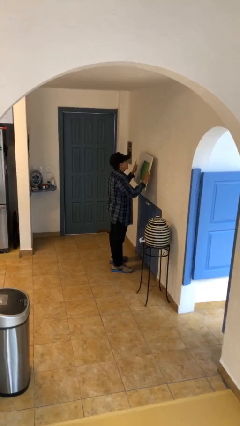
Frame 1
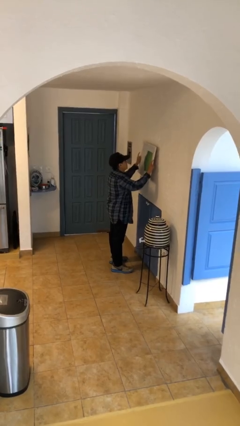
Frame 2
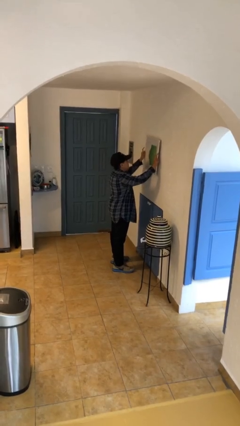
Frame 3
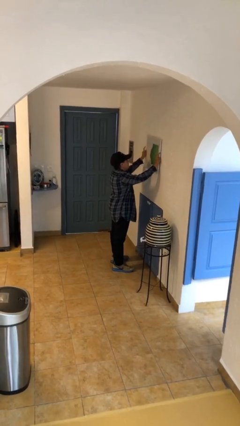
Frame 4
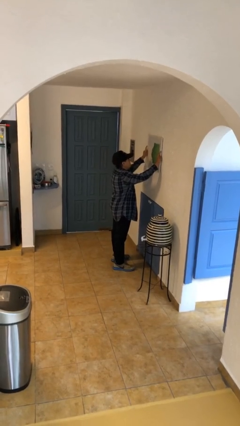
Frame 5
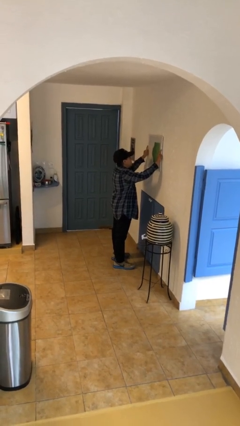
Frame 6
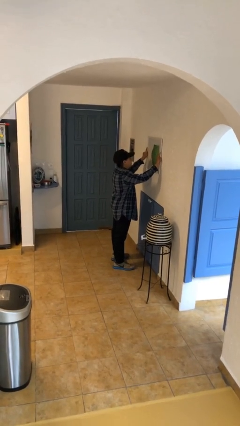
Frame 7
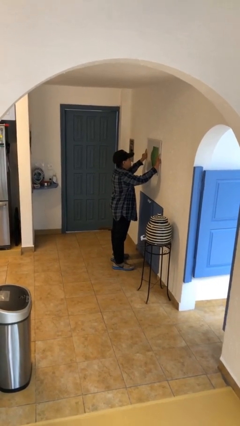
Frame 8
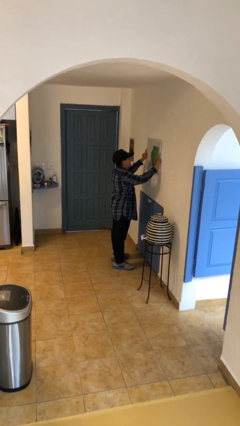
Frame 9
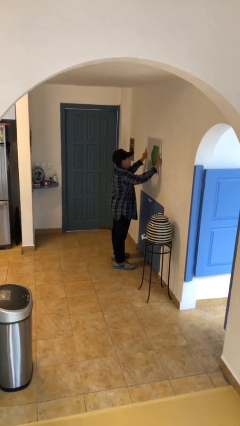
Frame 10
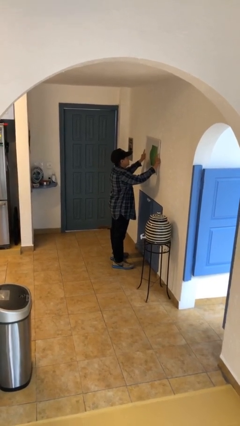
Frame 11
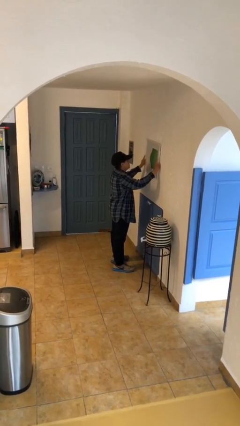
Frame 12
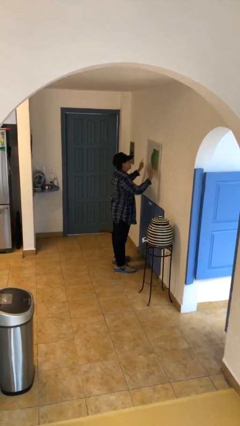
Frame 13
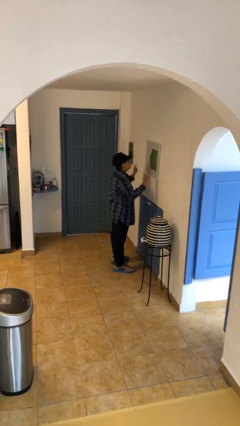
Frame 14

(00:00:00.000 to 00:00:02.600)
person puts up picture frame

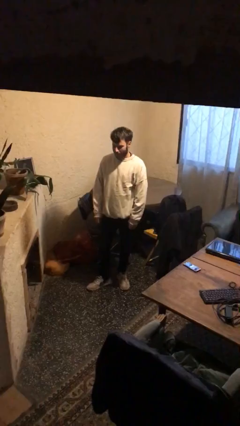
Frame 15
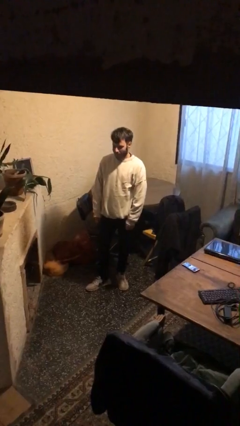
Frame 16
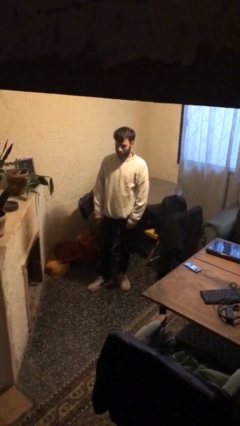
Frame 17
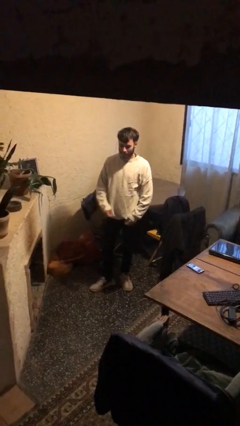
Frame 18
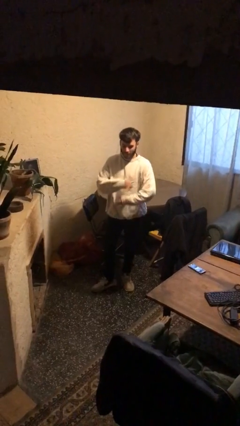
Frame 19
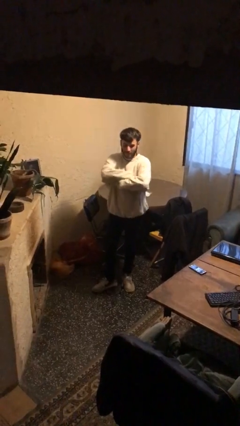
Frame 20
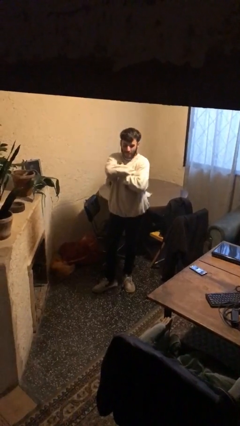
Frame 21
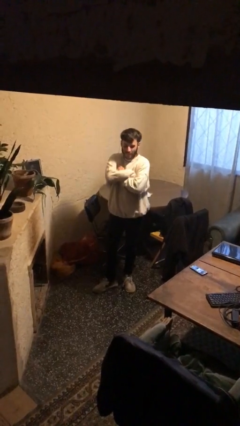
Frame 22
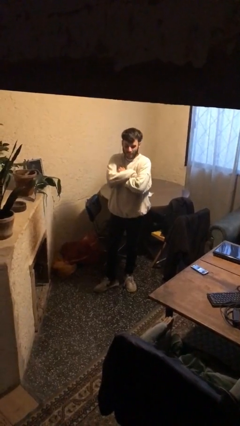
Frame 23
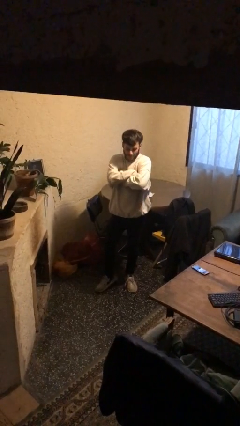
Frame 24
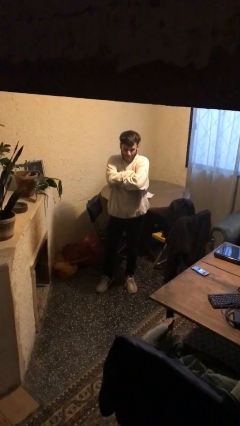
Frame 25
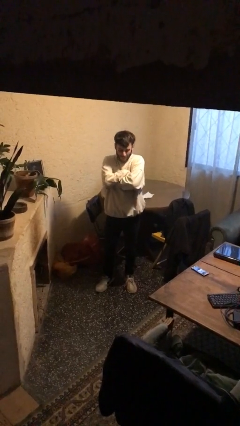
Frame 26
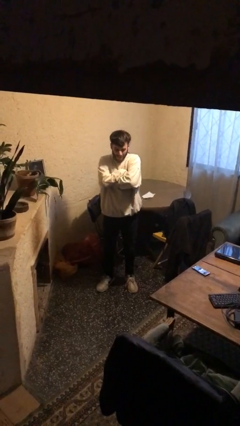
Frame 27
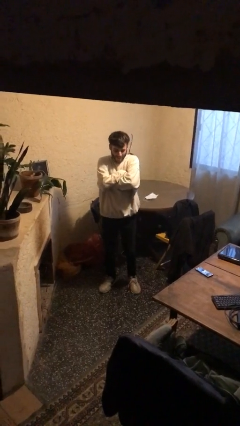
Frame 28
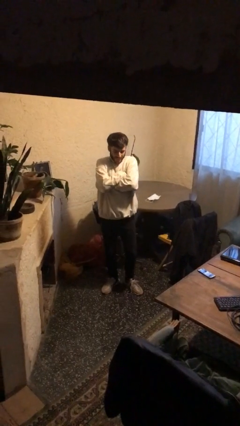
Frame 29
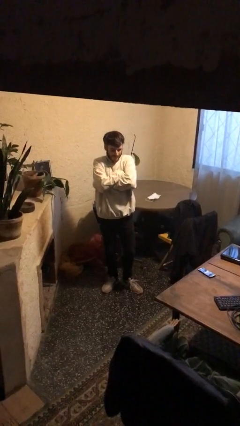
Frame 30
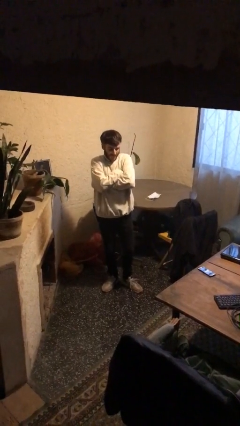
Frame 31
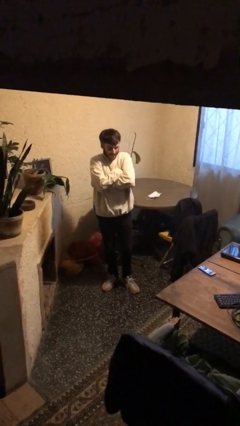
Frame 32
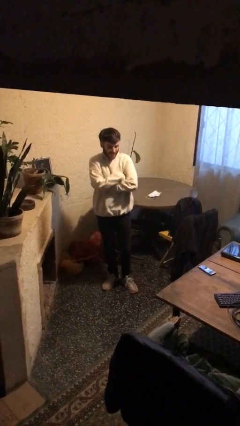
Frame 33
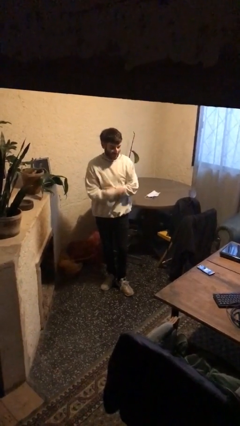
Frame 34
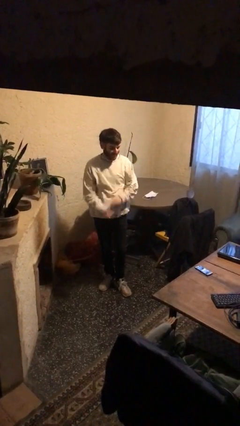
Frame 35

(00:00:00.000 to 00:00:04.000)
person crosses arms

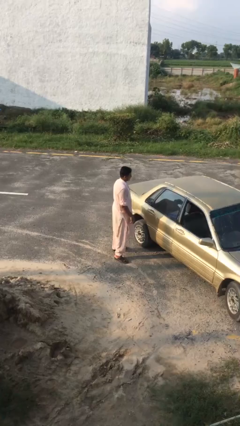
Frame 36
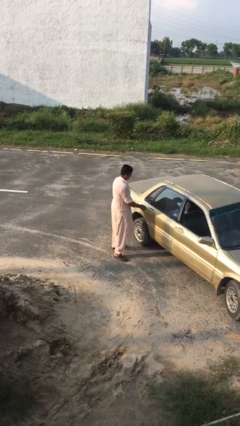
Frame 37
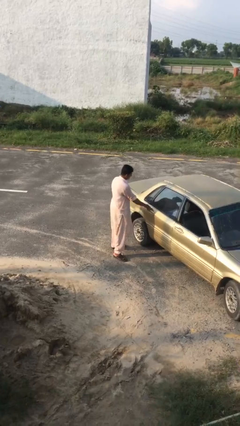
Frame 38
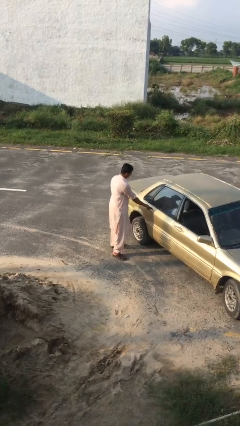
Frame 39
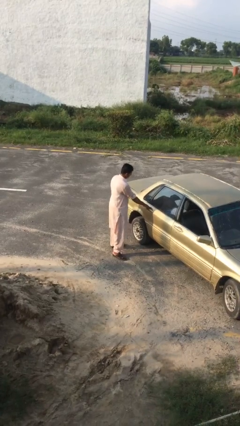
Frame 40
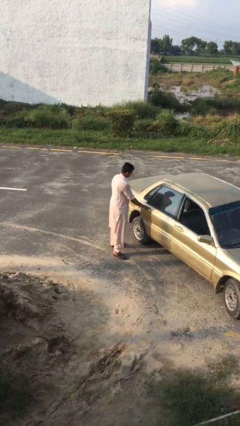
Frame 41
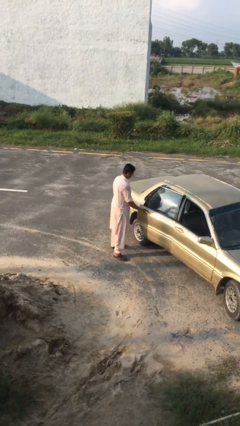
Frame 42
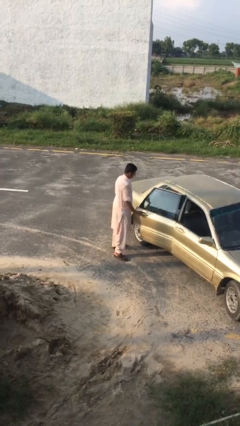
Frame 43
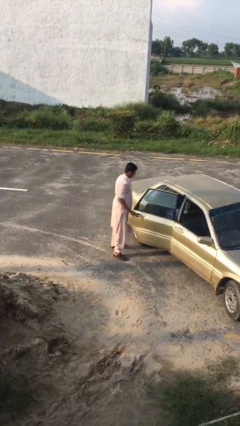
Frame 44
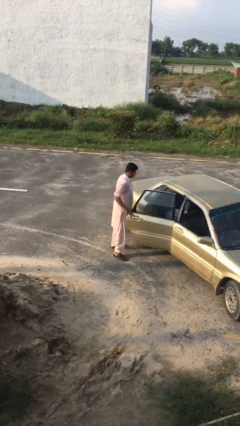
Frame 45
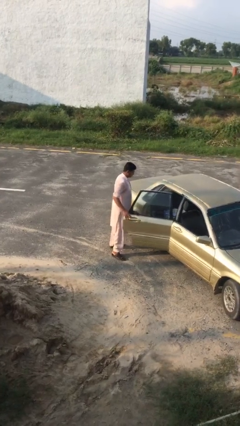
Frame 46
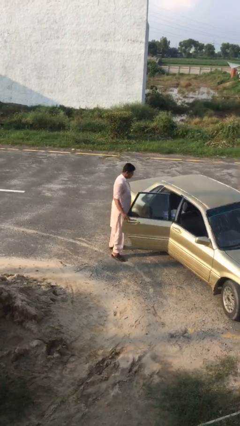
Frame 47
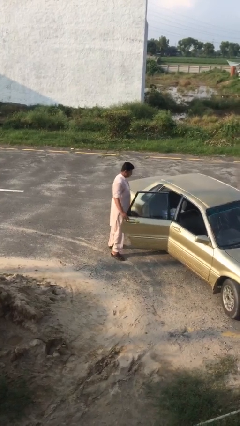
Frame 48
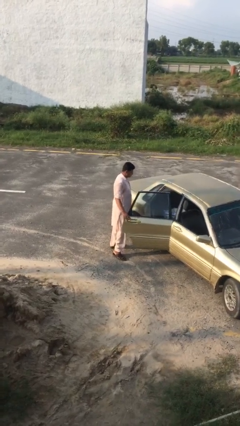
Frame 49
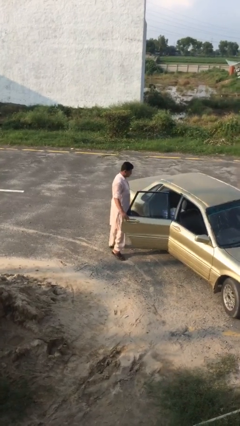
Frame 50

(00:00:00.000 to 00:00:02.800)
person opens car door

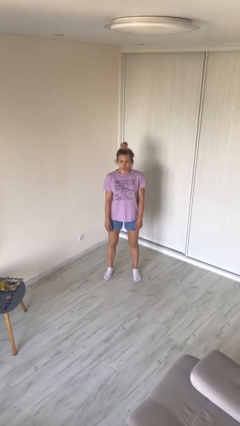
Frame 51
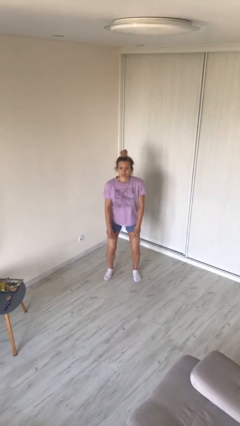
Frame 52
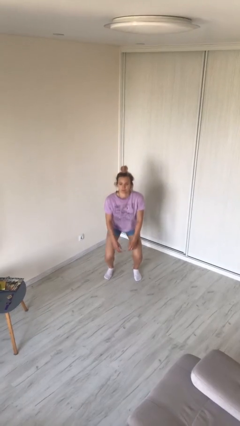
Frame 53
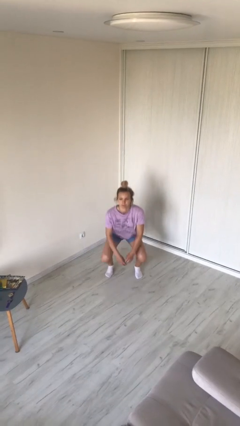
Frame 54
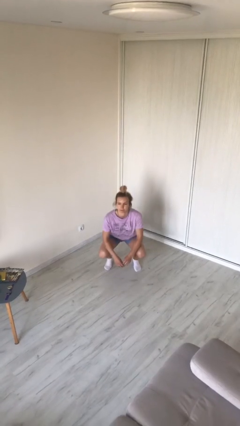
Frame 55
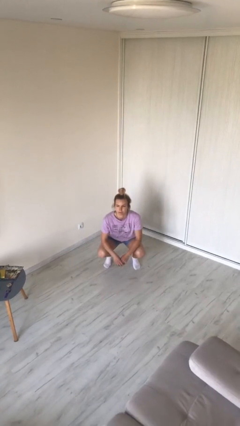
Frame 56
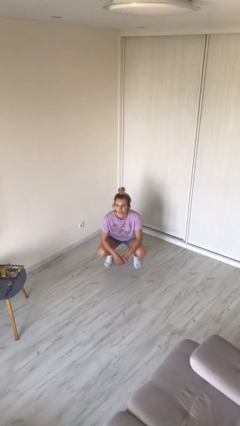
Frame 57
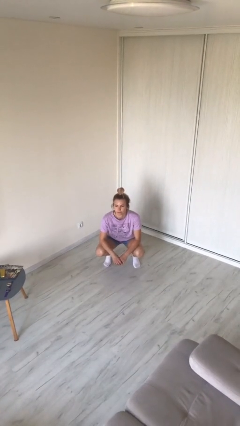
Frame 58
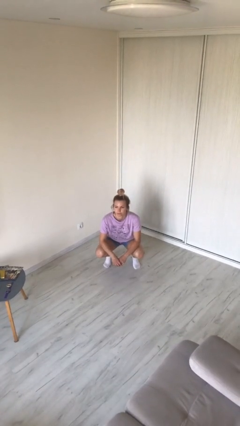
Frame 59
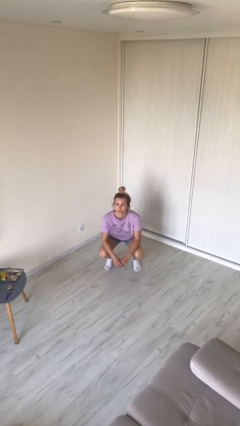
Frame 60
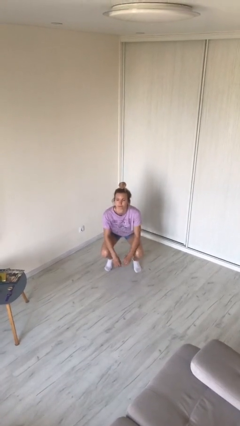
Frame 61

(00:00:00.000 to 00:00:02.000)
person squats

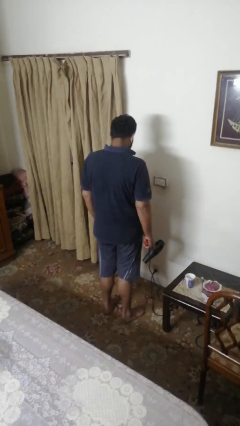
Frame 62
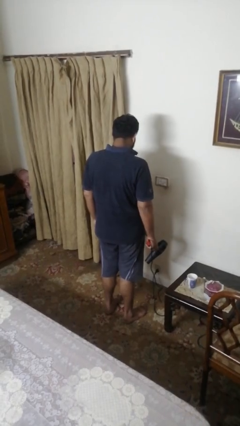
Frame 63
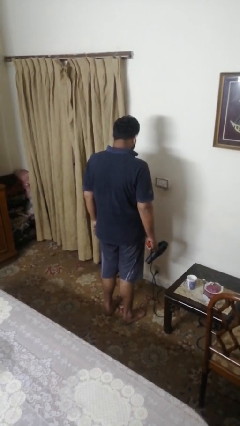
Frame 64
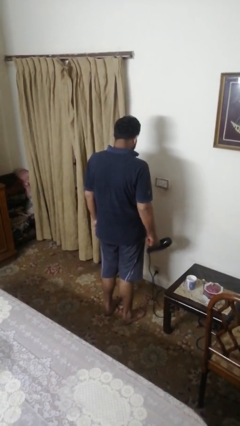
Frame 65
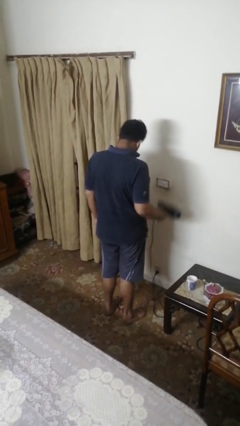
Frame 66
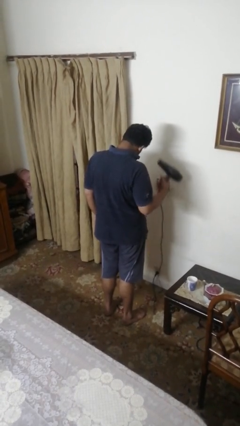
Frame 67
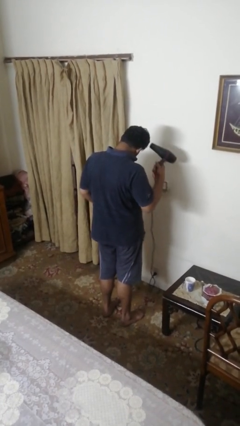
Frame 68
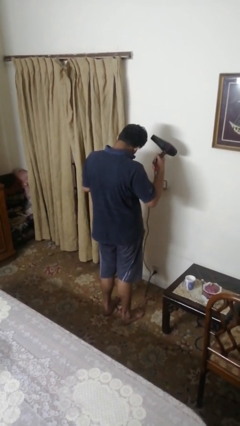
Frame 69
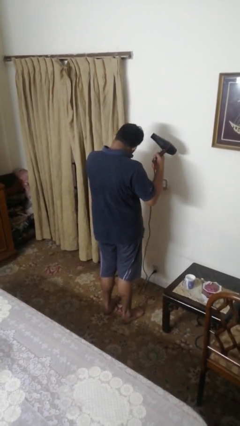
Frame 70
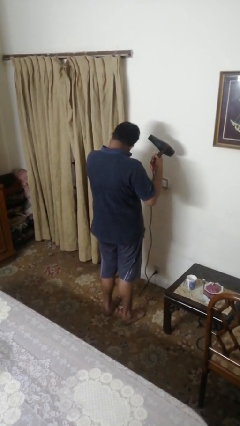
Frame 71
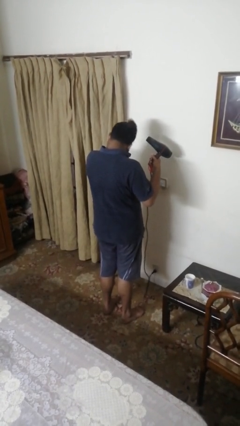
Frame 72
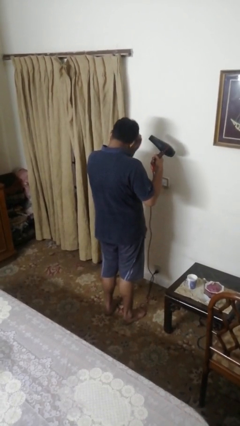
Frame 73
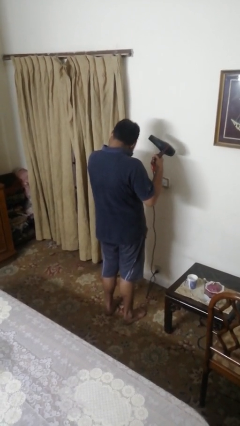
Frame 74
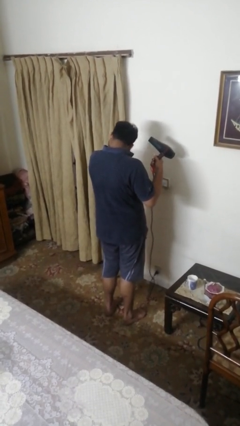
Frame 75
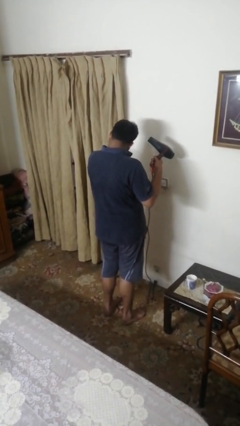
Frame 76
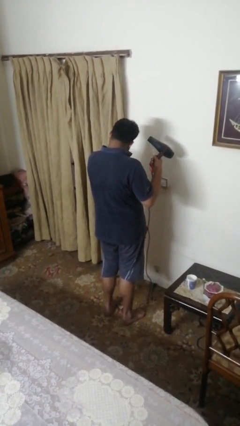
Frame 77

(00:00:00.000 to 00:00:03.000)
person dries hair with hairdryer

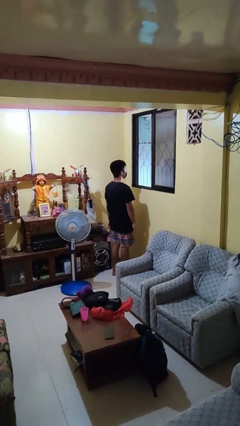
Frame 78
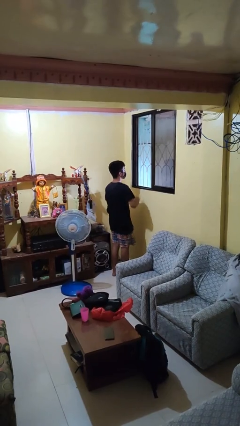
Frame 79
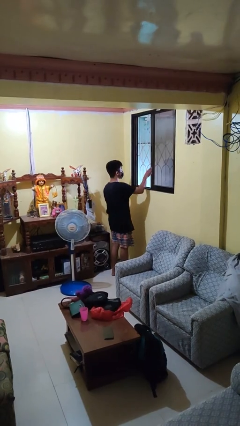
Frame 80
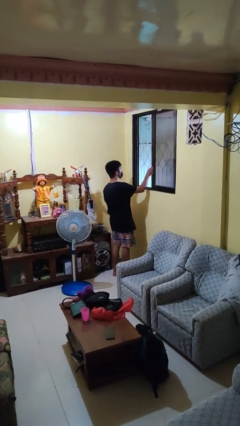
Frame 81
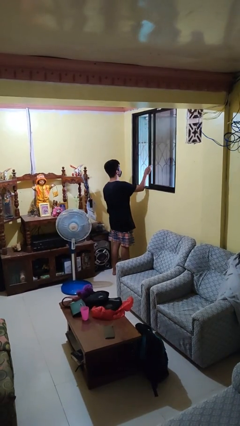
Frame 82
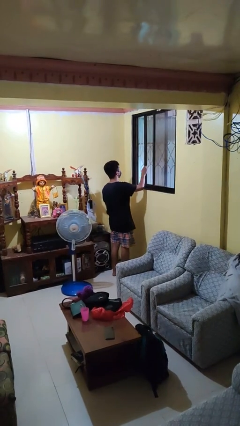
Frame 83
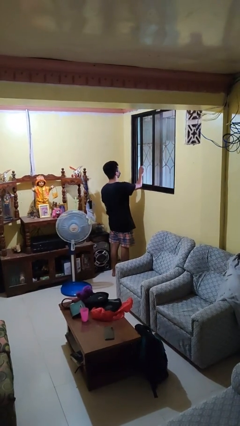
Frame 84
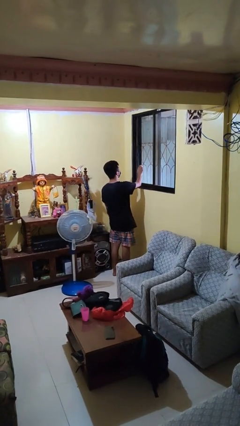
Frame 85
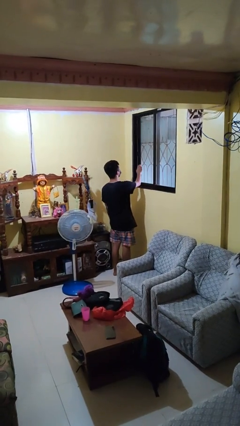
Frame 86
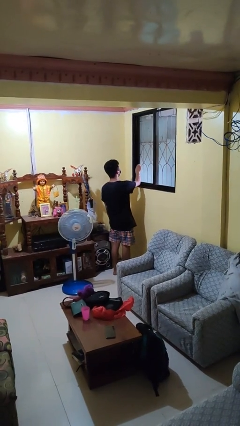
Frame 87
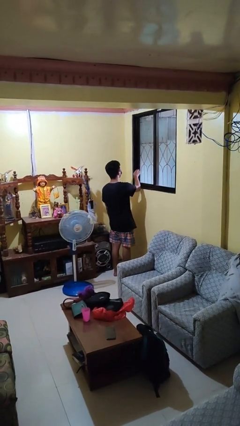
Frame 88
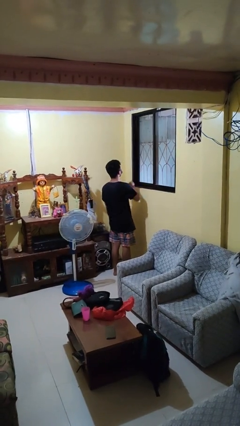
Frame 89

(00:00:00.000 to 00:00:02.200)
person closes home window

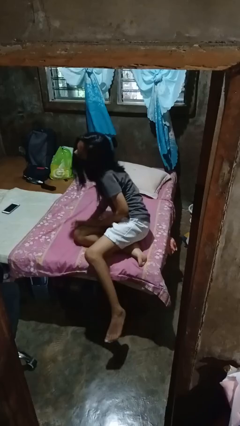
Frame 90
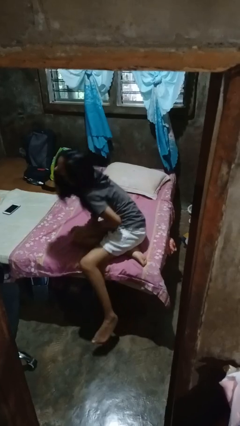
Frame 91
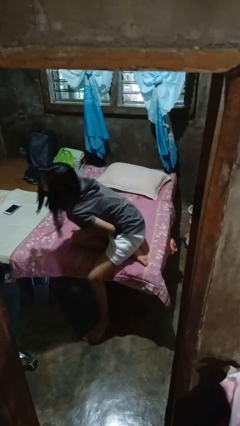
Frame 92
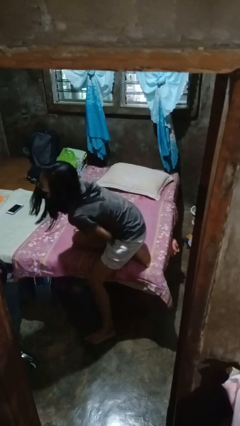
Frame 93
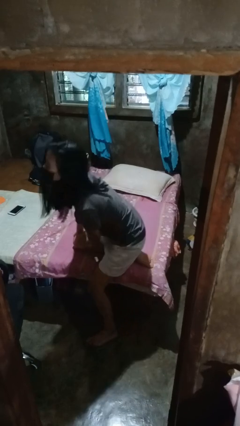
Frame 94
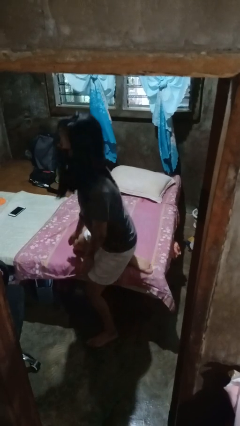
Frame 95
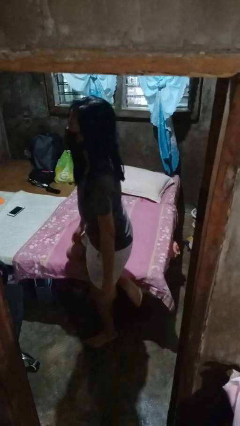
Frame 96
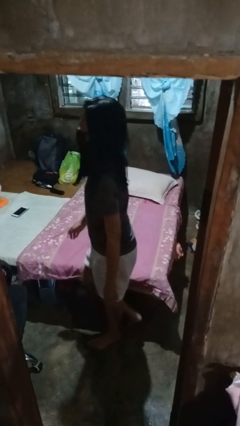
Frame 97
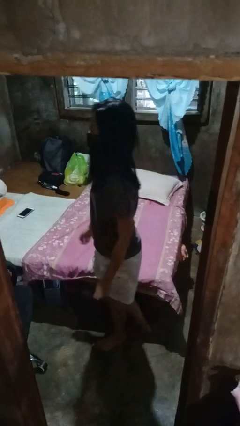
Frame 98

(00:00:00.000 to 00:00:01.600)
person stands up
